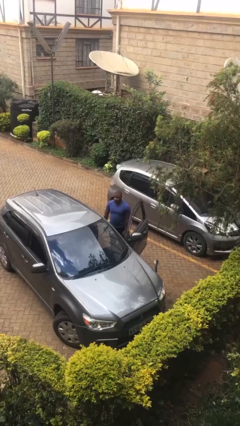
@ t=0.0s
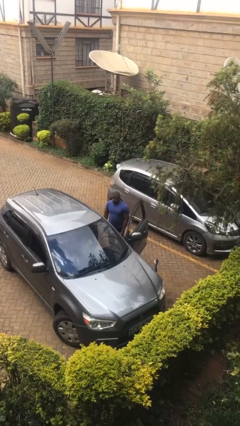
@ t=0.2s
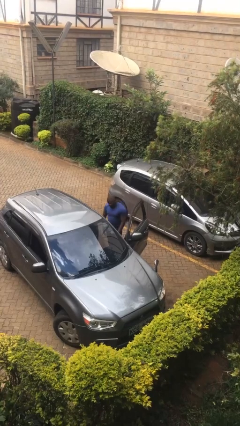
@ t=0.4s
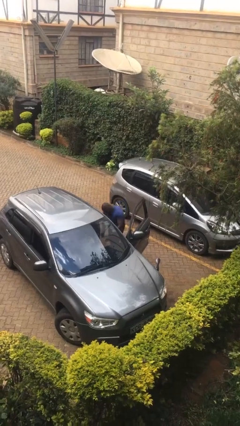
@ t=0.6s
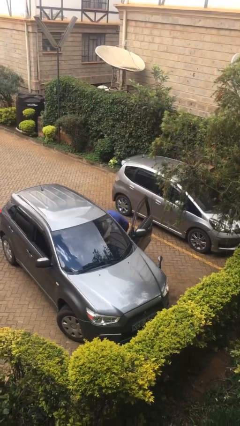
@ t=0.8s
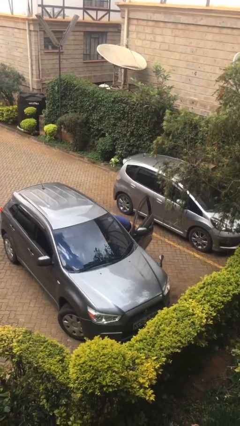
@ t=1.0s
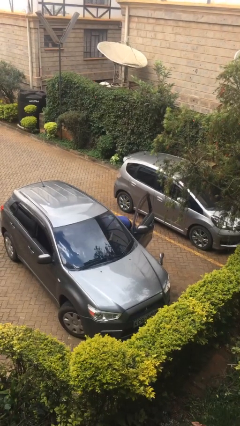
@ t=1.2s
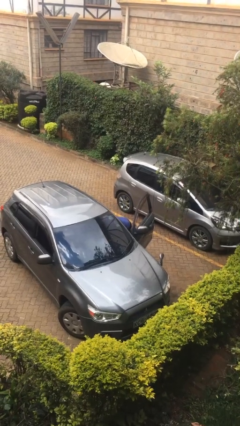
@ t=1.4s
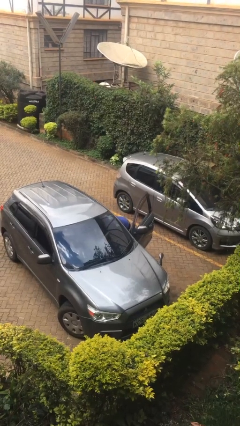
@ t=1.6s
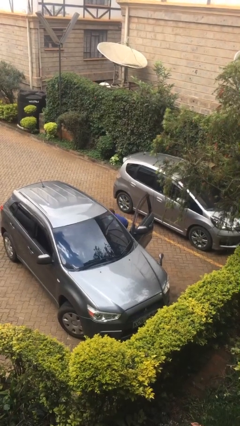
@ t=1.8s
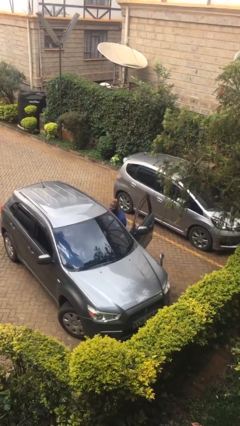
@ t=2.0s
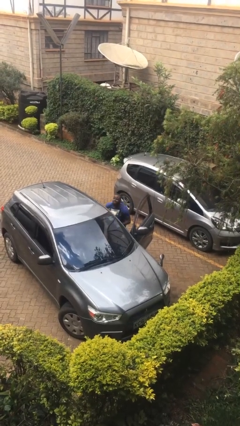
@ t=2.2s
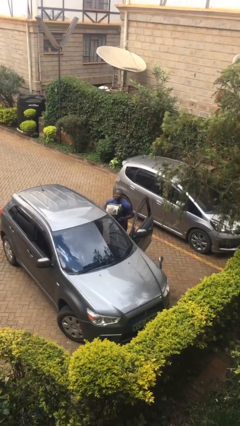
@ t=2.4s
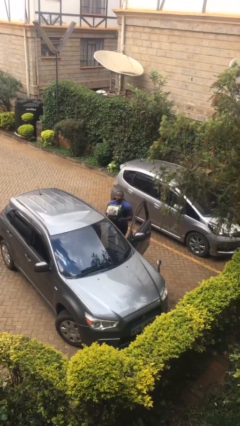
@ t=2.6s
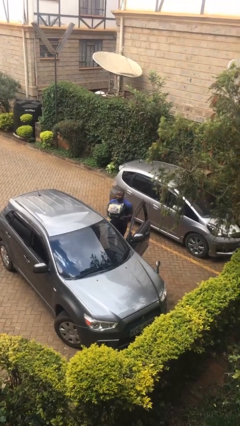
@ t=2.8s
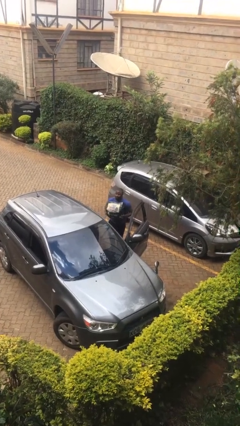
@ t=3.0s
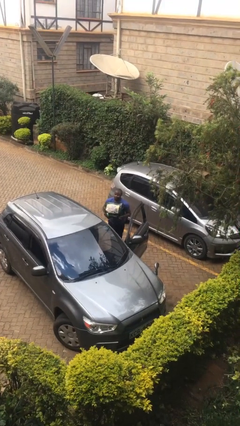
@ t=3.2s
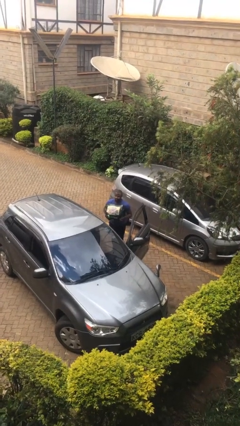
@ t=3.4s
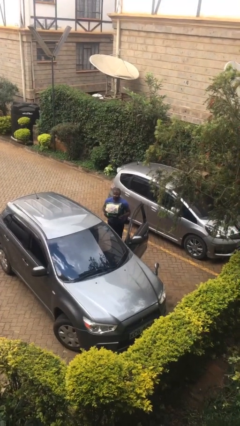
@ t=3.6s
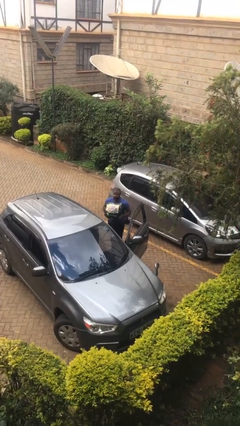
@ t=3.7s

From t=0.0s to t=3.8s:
person unloads car

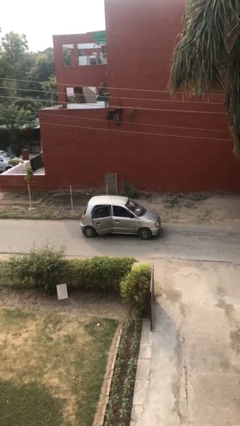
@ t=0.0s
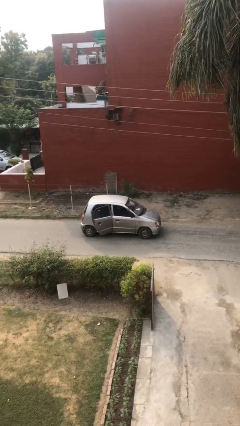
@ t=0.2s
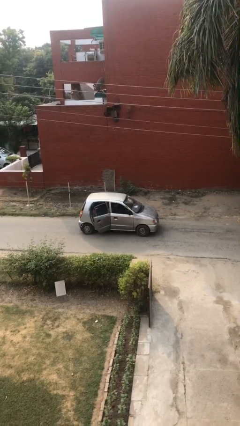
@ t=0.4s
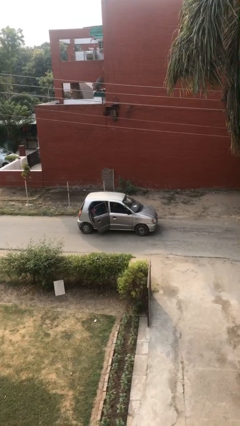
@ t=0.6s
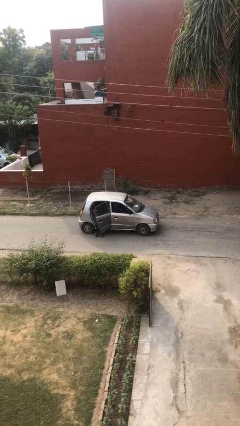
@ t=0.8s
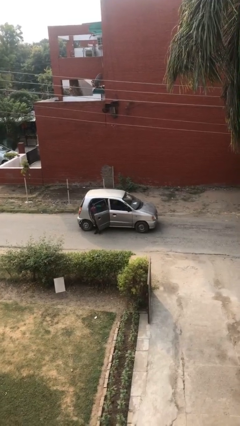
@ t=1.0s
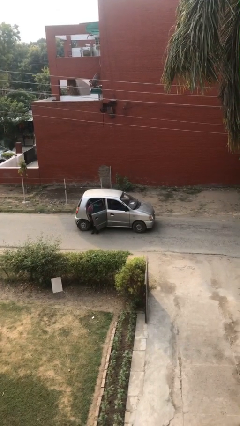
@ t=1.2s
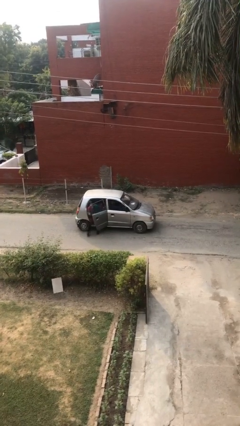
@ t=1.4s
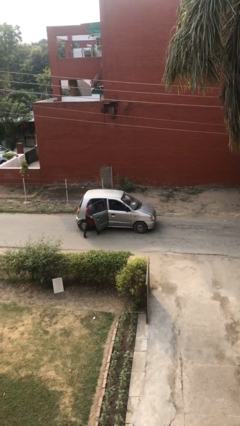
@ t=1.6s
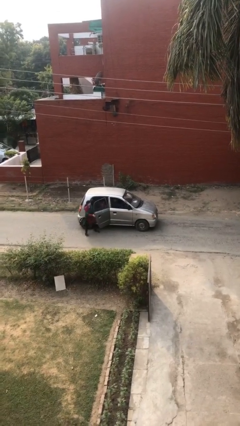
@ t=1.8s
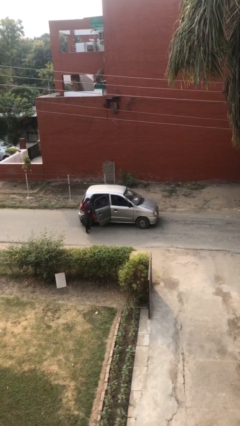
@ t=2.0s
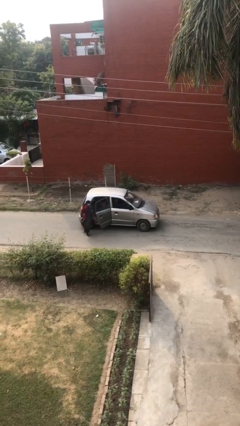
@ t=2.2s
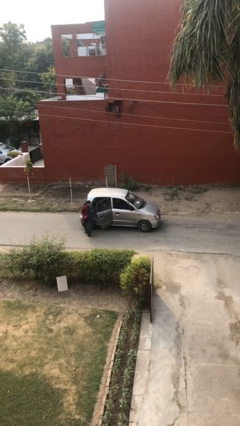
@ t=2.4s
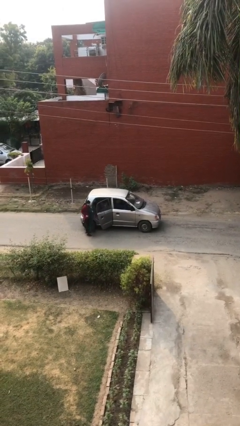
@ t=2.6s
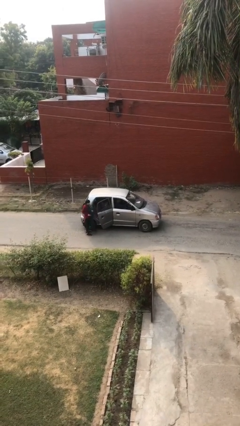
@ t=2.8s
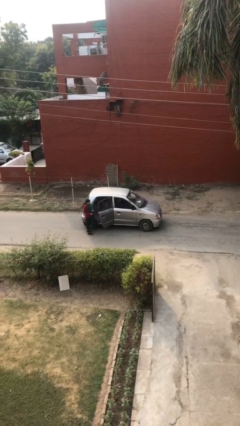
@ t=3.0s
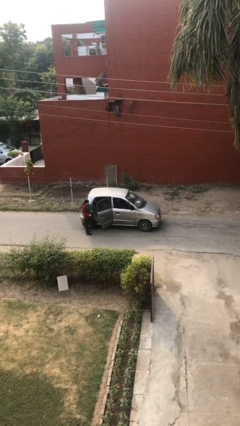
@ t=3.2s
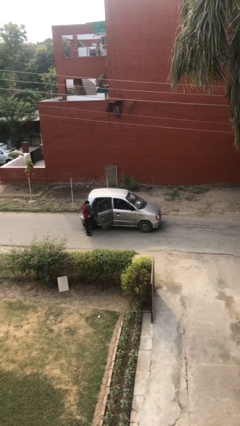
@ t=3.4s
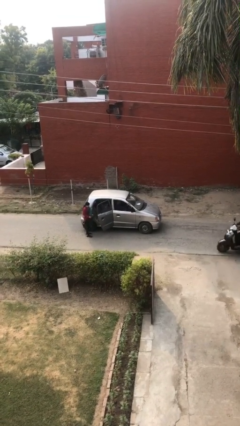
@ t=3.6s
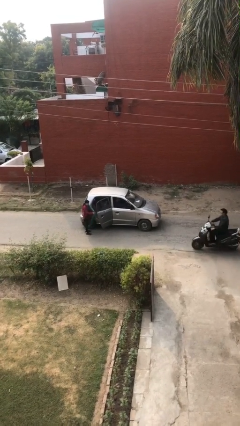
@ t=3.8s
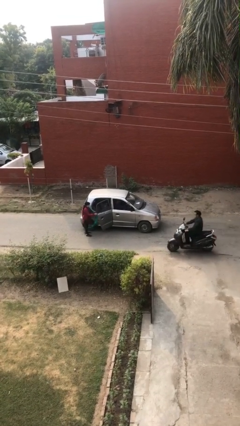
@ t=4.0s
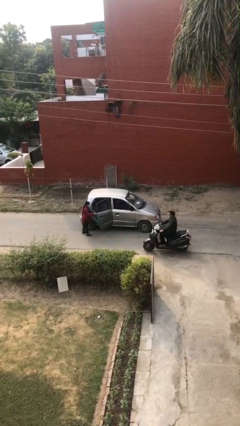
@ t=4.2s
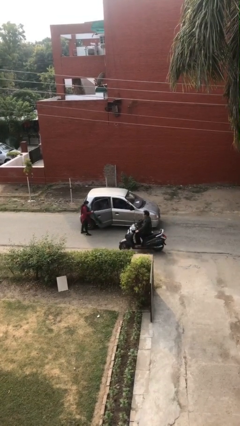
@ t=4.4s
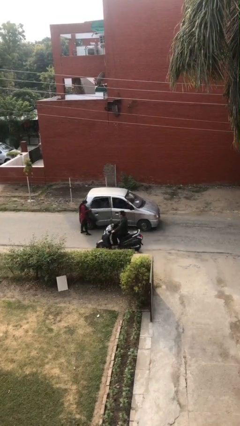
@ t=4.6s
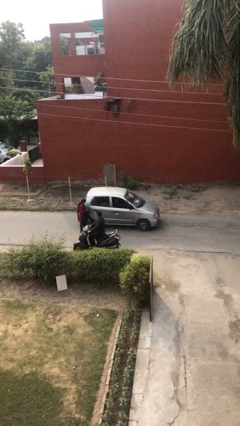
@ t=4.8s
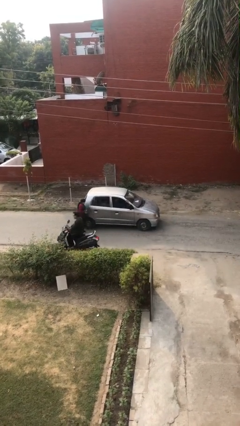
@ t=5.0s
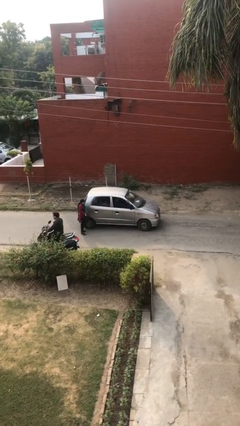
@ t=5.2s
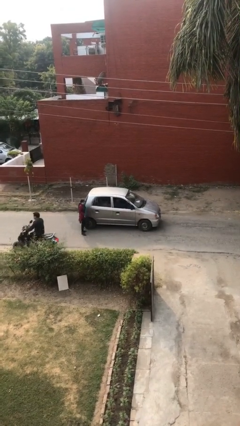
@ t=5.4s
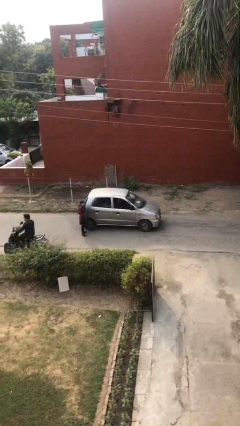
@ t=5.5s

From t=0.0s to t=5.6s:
car drops off person

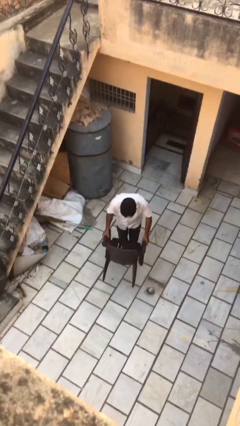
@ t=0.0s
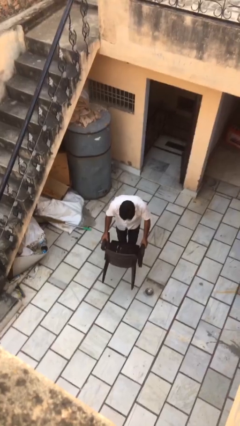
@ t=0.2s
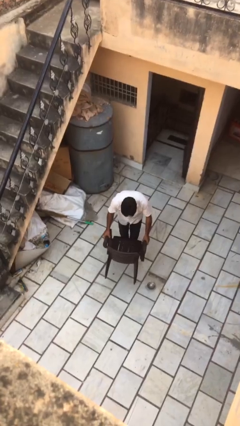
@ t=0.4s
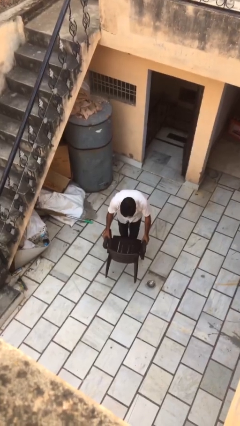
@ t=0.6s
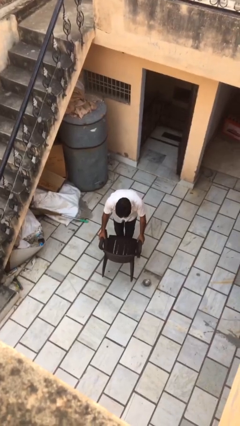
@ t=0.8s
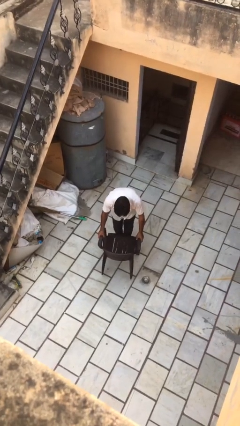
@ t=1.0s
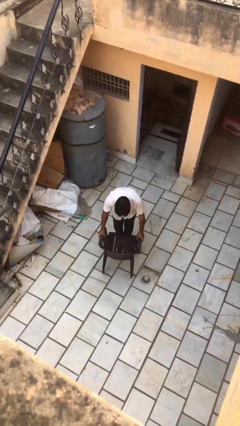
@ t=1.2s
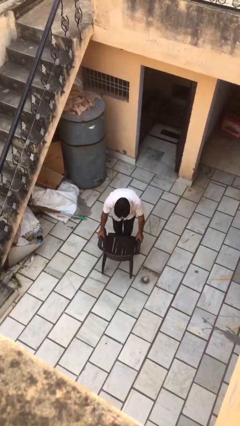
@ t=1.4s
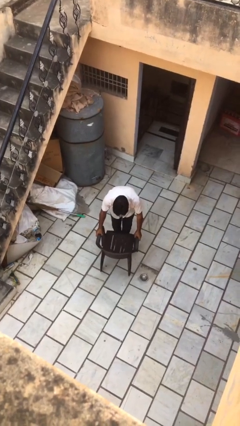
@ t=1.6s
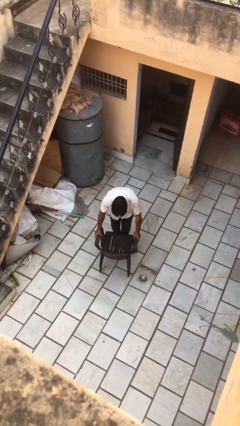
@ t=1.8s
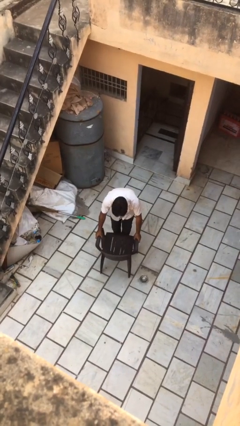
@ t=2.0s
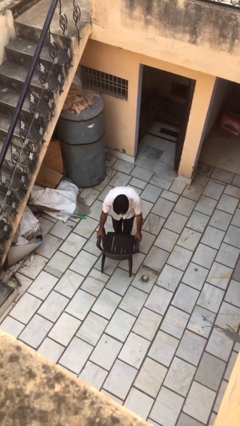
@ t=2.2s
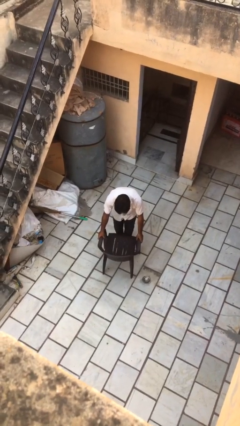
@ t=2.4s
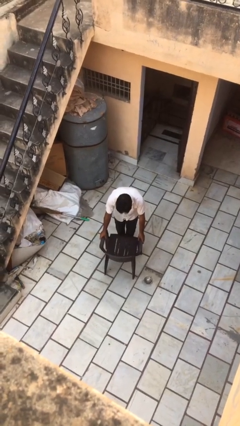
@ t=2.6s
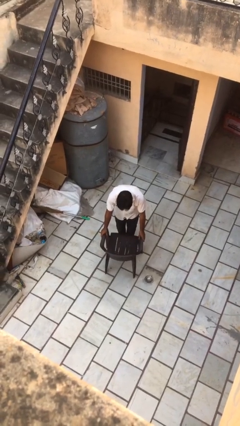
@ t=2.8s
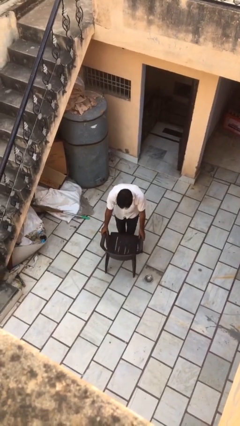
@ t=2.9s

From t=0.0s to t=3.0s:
person puts down object on floor

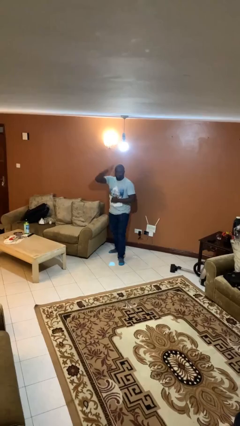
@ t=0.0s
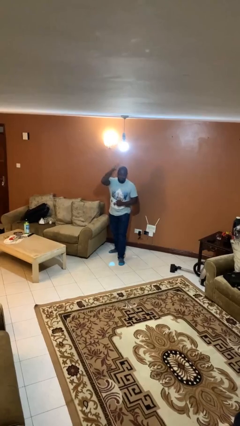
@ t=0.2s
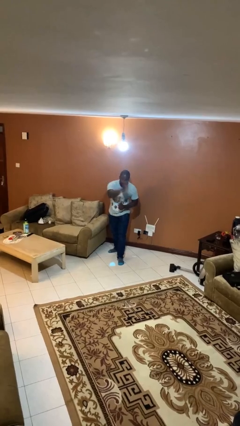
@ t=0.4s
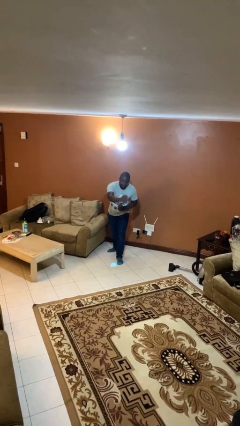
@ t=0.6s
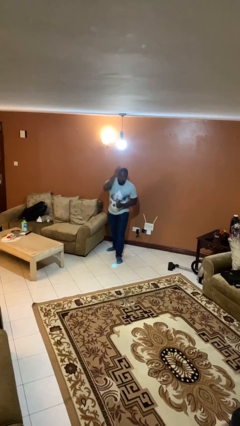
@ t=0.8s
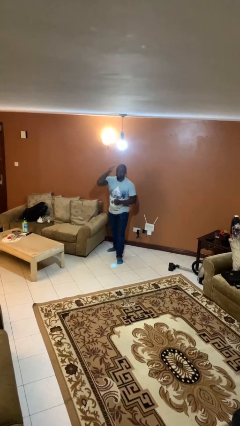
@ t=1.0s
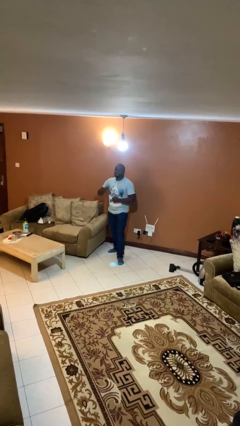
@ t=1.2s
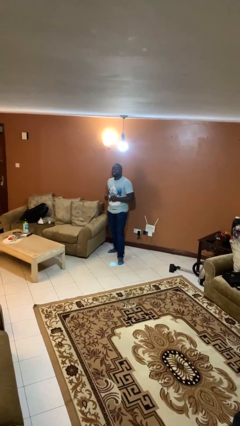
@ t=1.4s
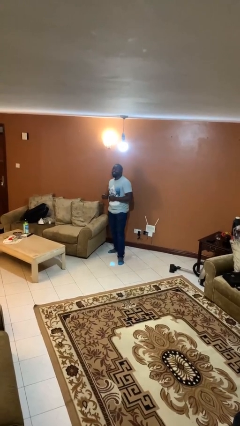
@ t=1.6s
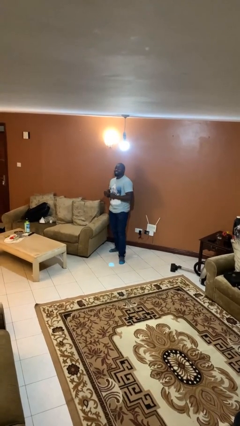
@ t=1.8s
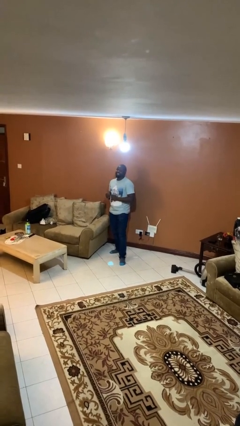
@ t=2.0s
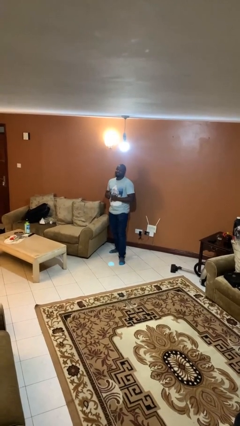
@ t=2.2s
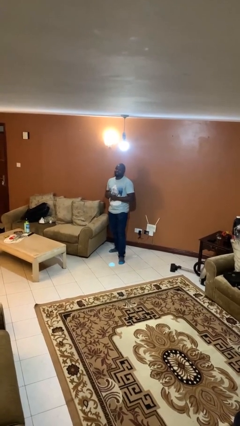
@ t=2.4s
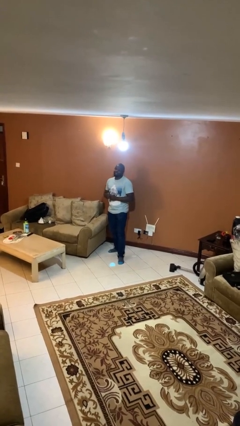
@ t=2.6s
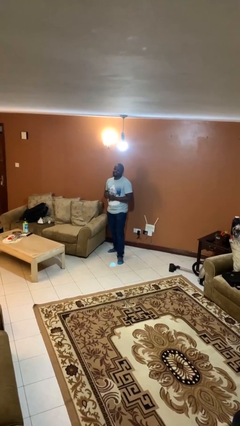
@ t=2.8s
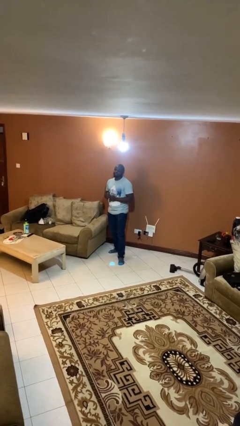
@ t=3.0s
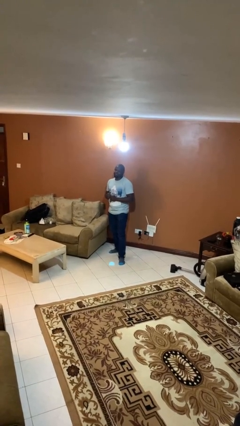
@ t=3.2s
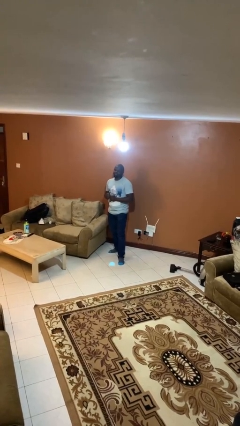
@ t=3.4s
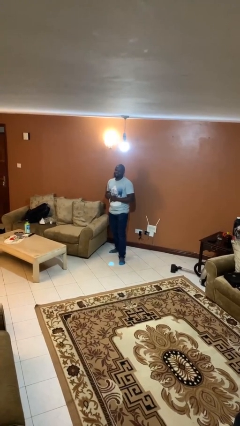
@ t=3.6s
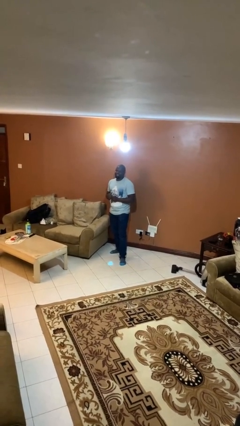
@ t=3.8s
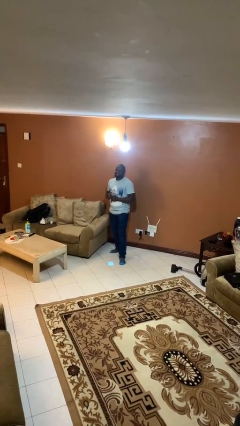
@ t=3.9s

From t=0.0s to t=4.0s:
person karate chop

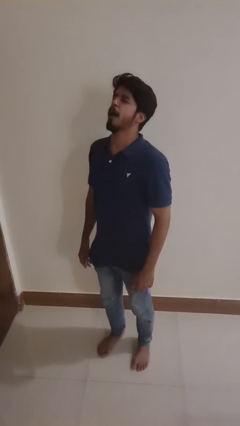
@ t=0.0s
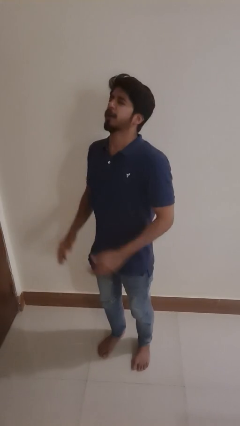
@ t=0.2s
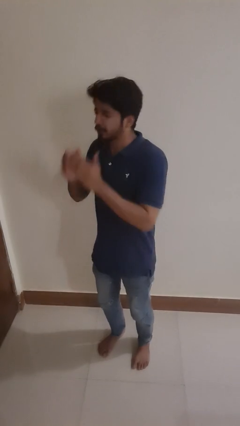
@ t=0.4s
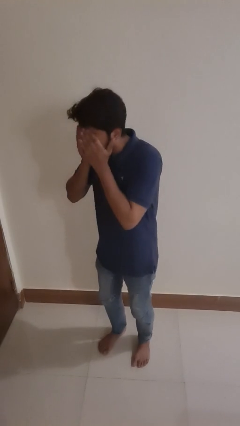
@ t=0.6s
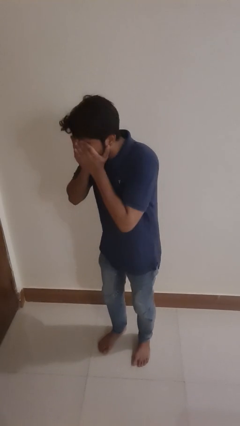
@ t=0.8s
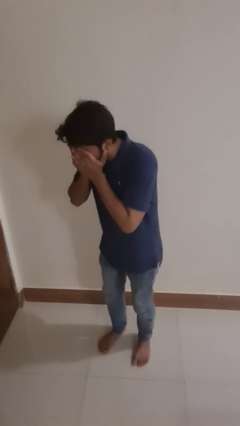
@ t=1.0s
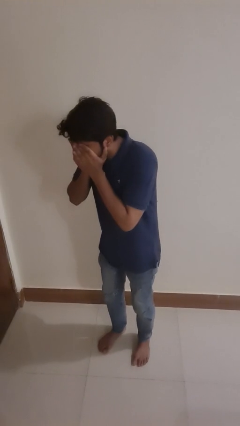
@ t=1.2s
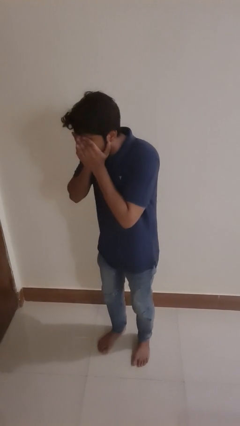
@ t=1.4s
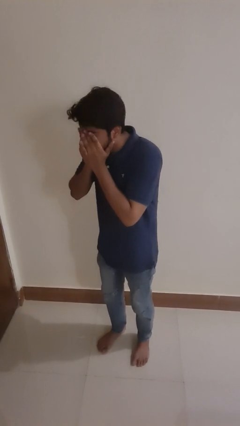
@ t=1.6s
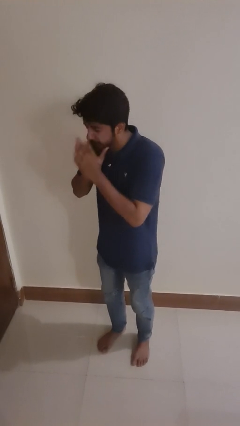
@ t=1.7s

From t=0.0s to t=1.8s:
person sneezes into hand
